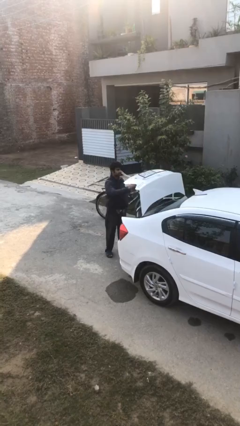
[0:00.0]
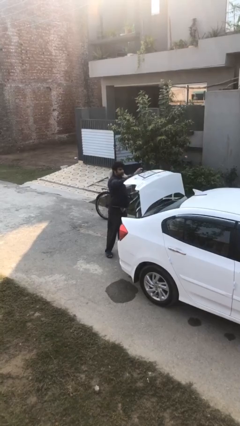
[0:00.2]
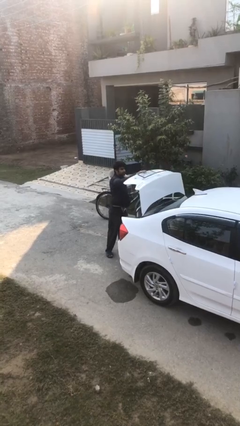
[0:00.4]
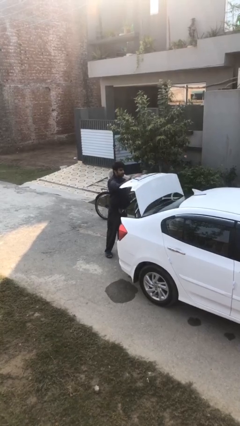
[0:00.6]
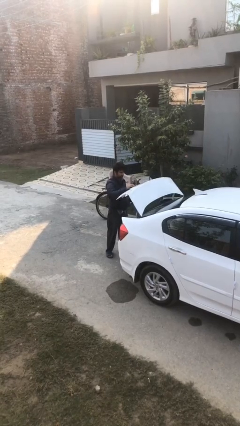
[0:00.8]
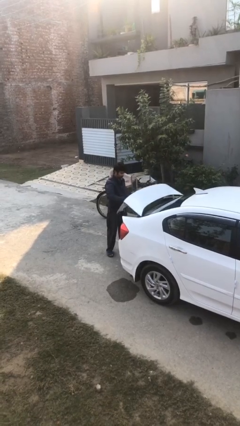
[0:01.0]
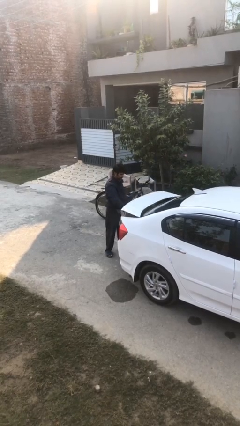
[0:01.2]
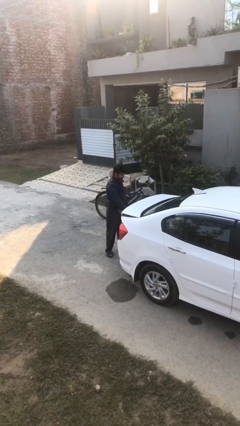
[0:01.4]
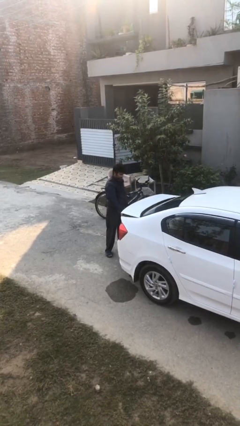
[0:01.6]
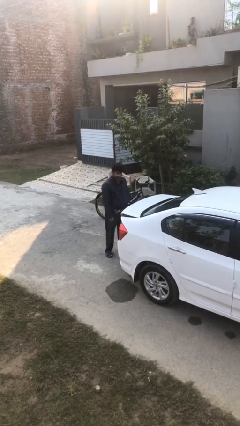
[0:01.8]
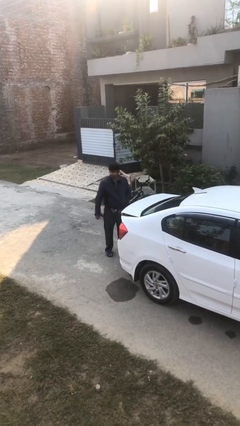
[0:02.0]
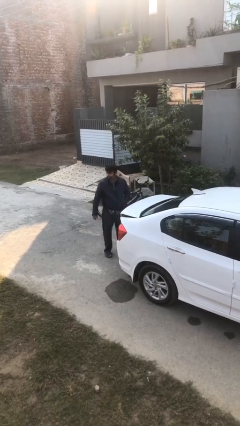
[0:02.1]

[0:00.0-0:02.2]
person closes car trunk

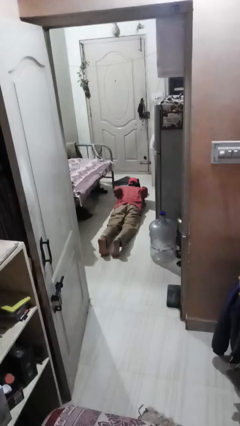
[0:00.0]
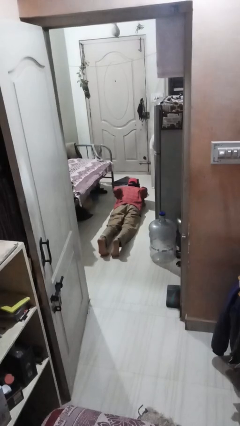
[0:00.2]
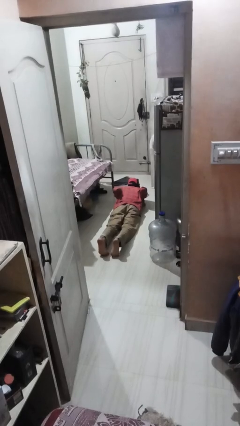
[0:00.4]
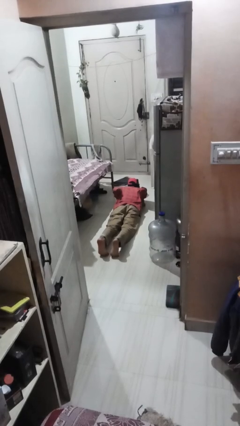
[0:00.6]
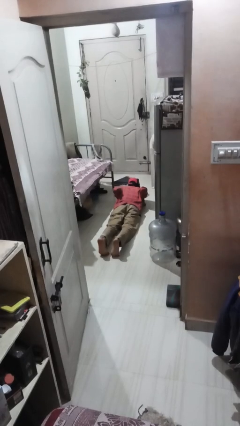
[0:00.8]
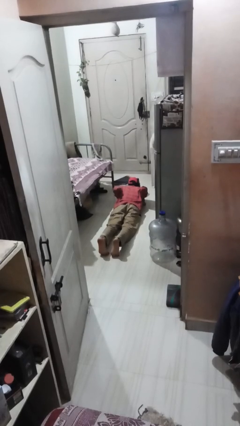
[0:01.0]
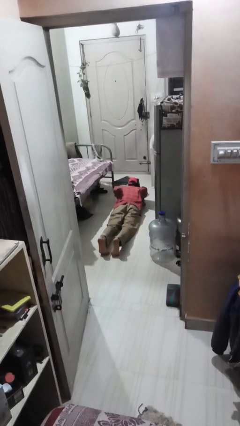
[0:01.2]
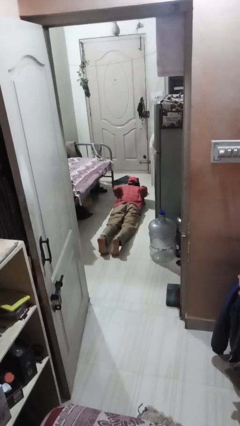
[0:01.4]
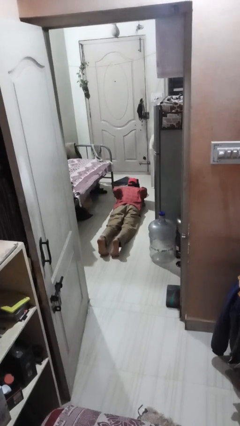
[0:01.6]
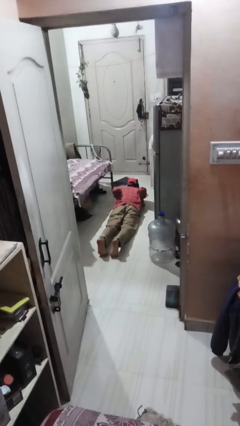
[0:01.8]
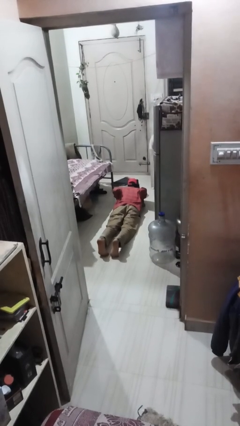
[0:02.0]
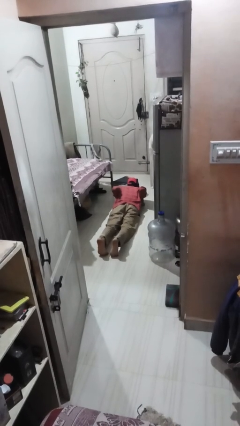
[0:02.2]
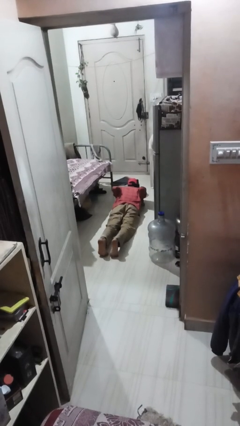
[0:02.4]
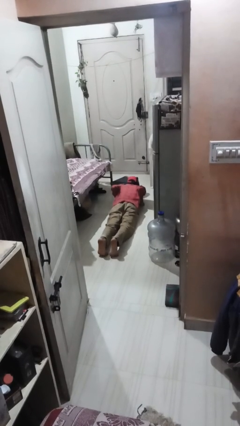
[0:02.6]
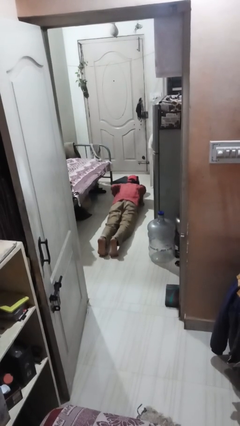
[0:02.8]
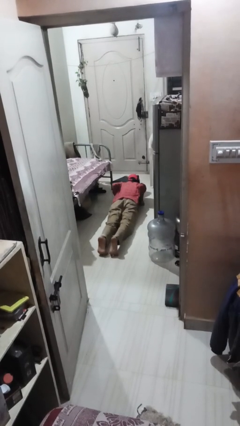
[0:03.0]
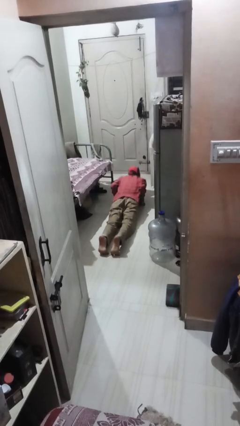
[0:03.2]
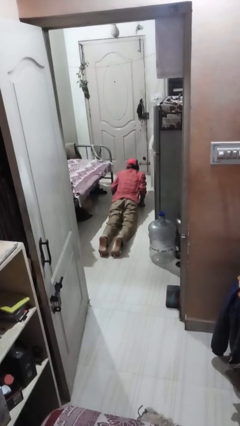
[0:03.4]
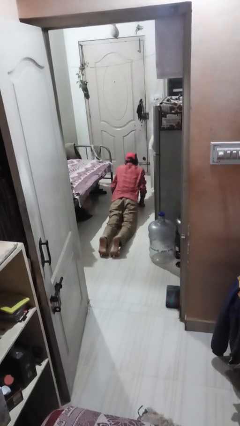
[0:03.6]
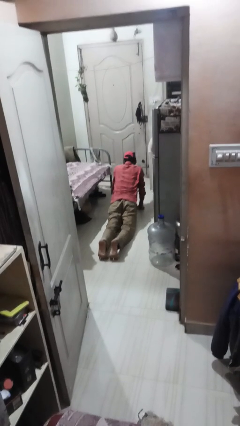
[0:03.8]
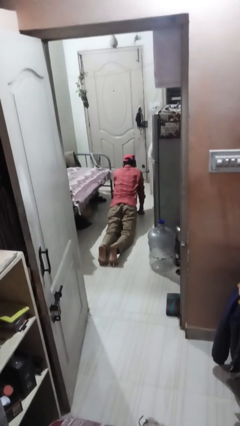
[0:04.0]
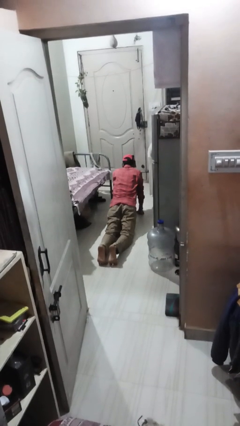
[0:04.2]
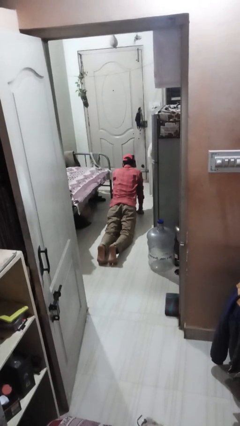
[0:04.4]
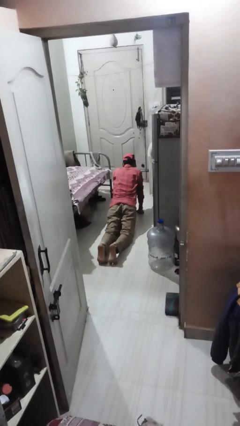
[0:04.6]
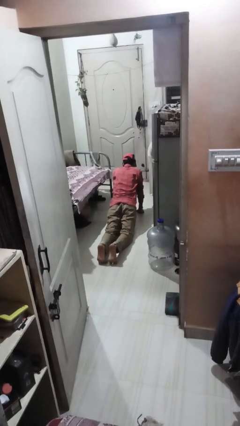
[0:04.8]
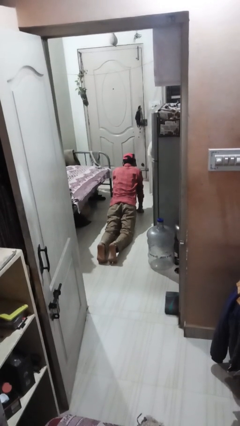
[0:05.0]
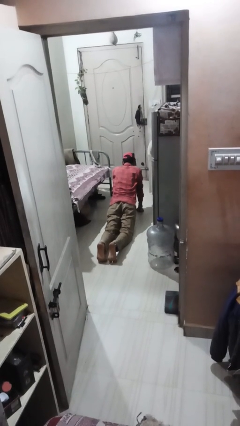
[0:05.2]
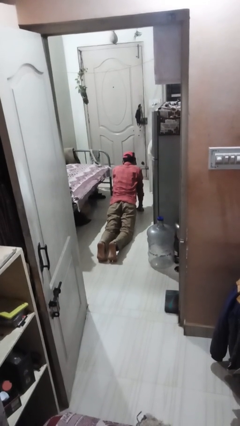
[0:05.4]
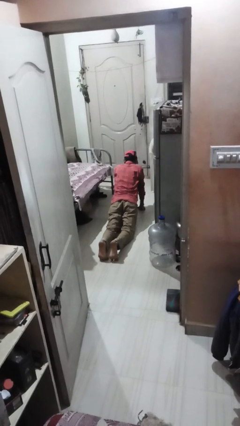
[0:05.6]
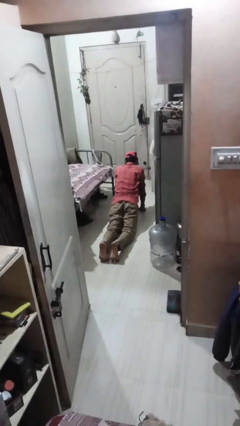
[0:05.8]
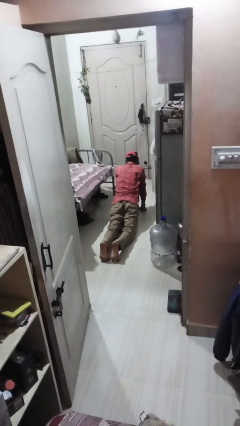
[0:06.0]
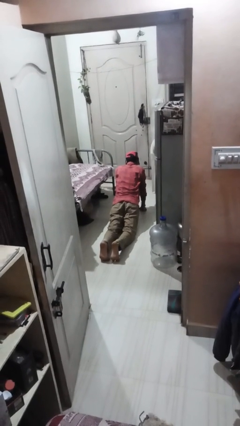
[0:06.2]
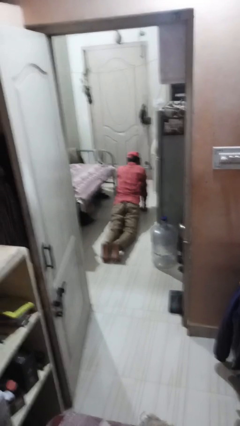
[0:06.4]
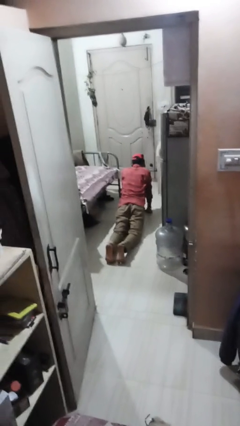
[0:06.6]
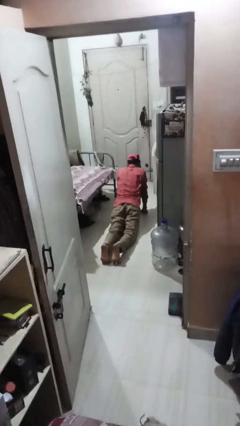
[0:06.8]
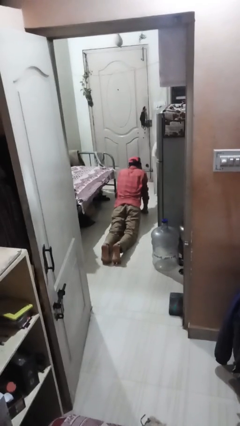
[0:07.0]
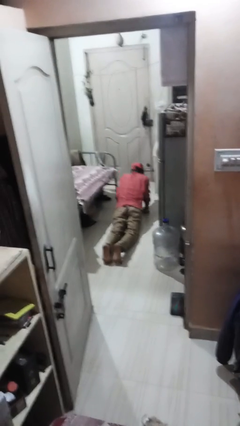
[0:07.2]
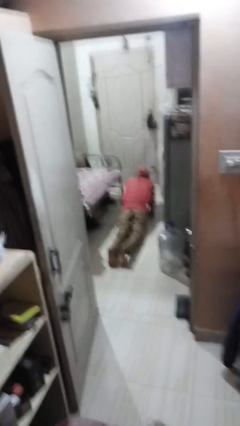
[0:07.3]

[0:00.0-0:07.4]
person exercises with pushup

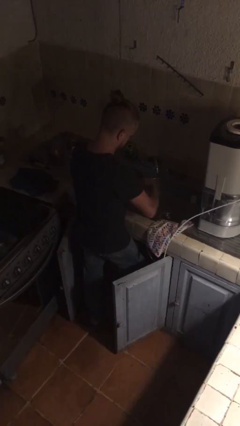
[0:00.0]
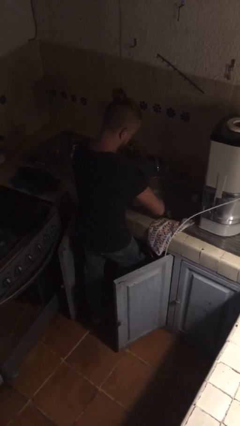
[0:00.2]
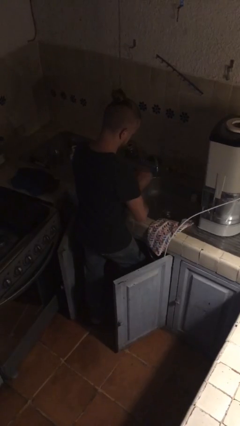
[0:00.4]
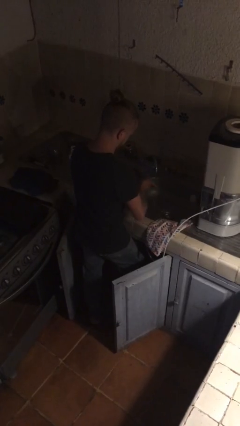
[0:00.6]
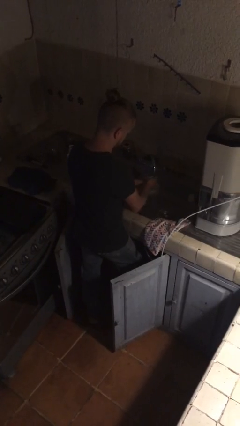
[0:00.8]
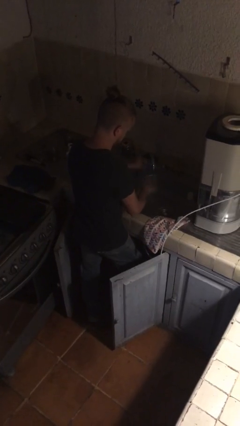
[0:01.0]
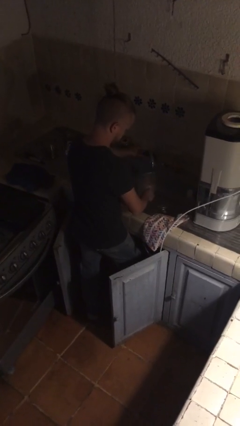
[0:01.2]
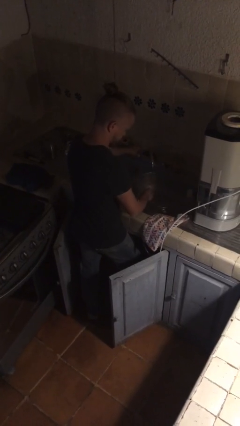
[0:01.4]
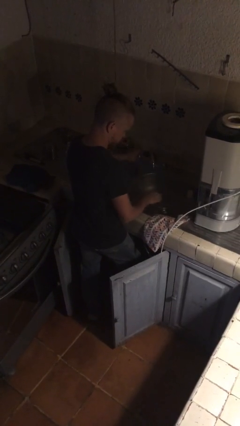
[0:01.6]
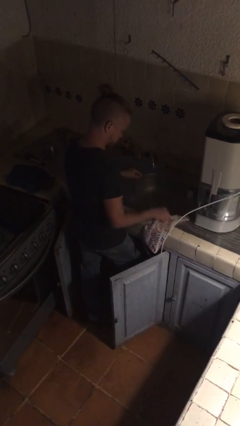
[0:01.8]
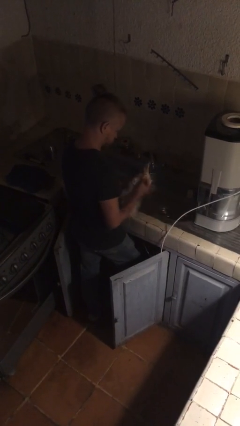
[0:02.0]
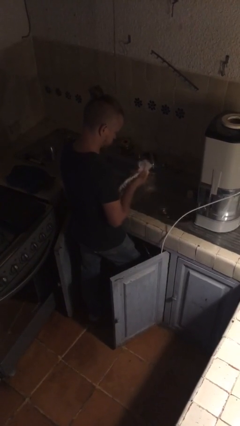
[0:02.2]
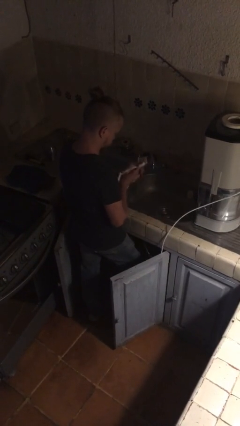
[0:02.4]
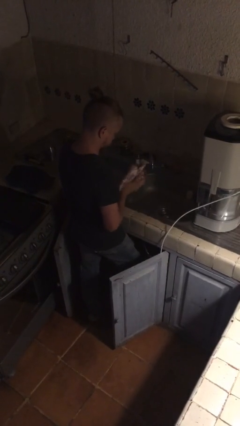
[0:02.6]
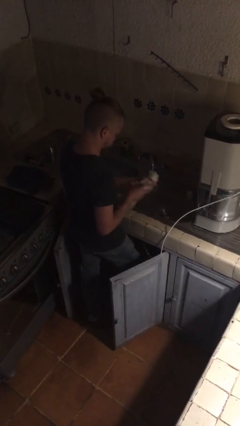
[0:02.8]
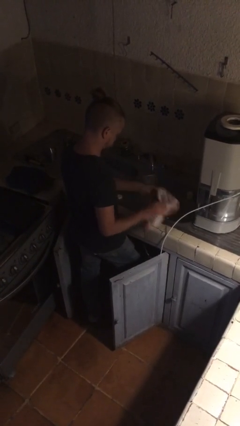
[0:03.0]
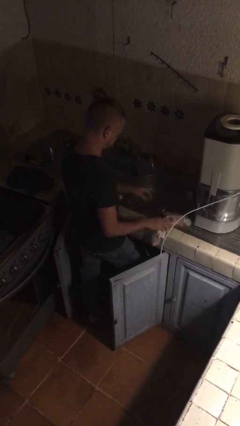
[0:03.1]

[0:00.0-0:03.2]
person dries hands with towel

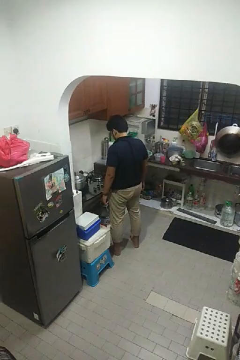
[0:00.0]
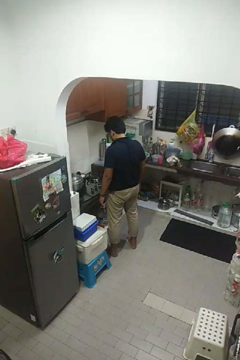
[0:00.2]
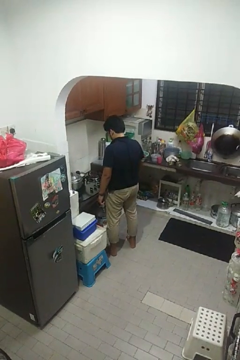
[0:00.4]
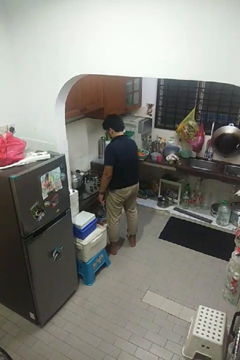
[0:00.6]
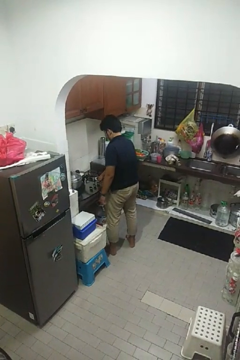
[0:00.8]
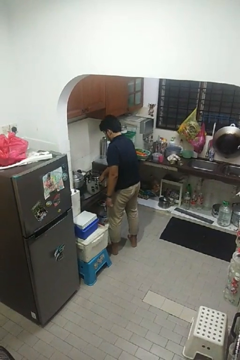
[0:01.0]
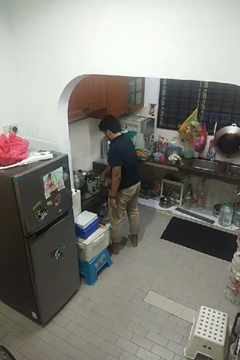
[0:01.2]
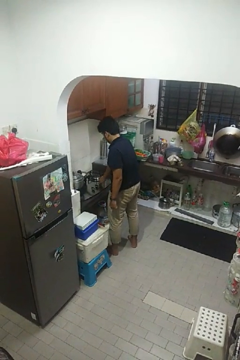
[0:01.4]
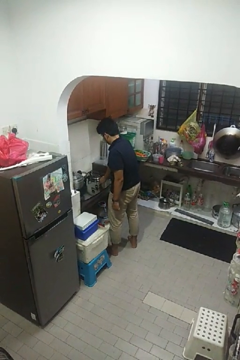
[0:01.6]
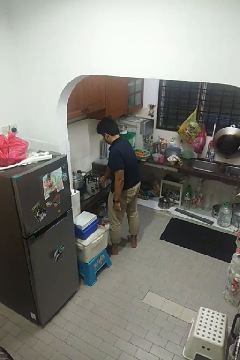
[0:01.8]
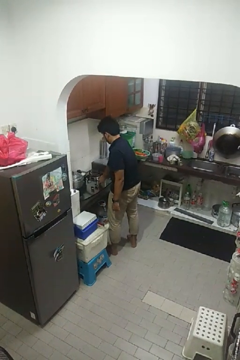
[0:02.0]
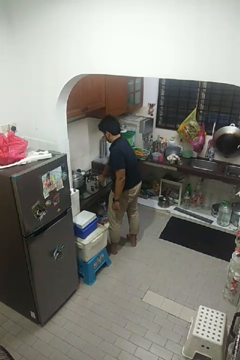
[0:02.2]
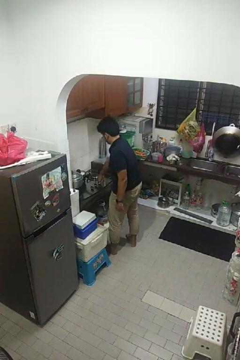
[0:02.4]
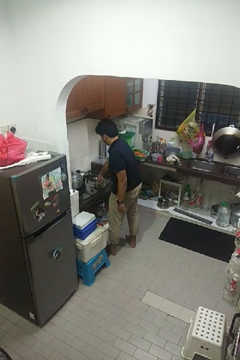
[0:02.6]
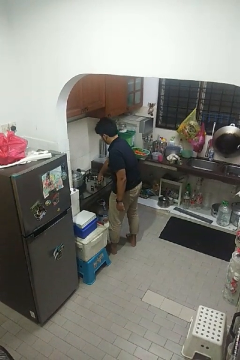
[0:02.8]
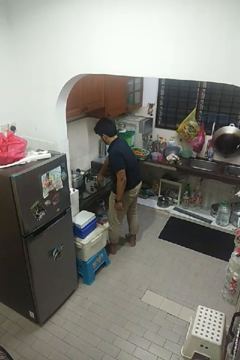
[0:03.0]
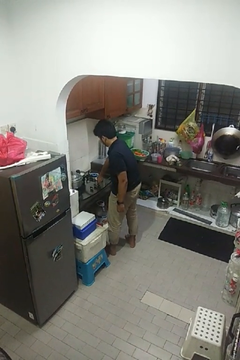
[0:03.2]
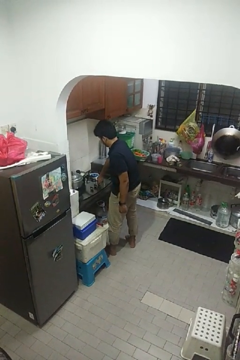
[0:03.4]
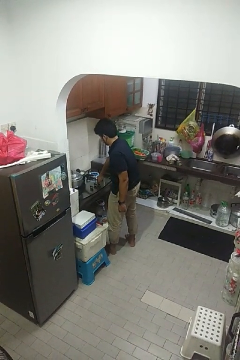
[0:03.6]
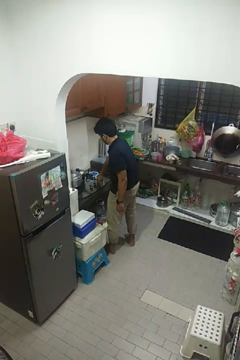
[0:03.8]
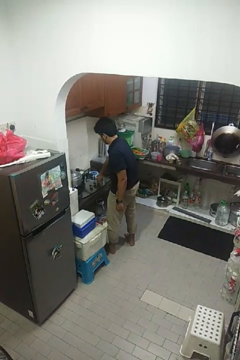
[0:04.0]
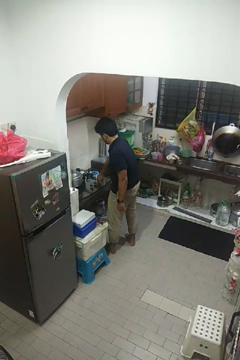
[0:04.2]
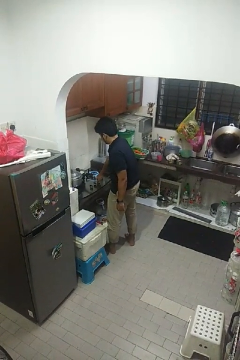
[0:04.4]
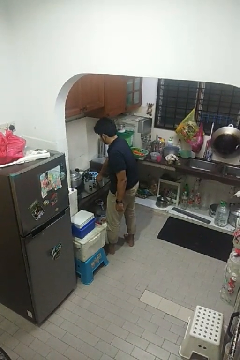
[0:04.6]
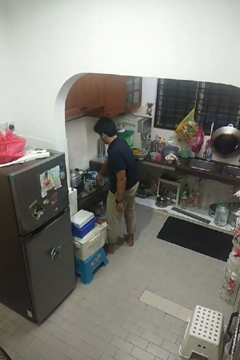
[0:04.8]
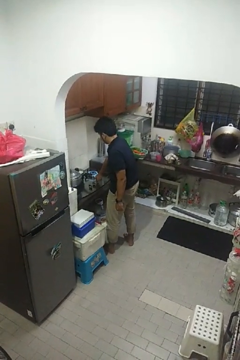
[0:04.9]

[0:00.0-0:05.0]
person turns on stovetop

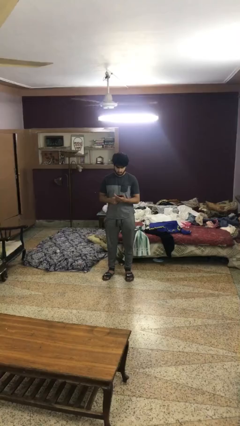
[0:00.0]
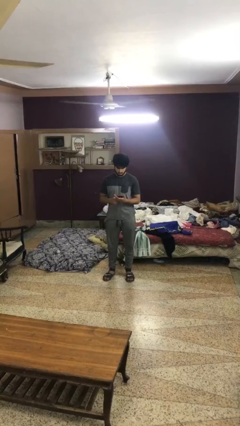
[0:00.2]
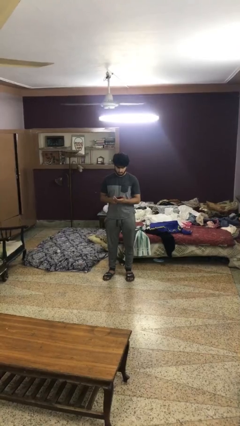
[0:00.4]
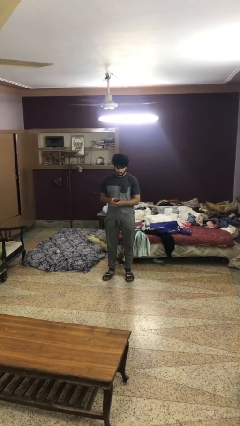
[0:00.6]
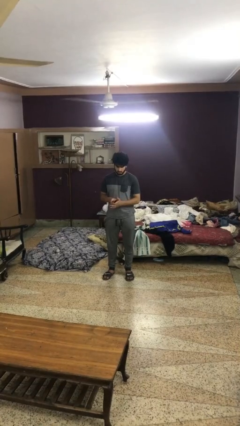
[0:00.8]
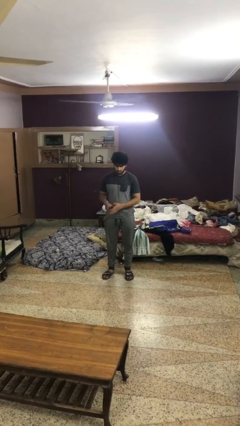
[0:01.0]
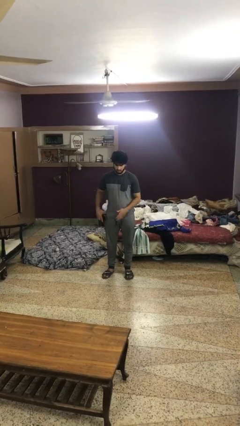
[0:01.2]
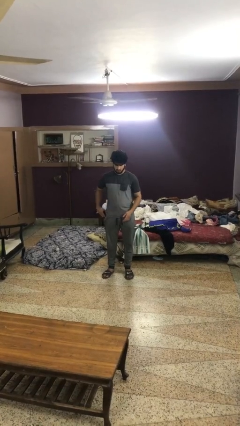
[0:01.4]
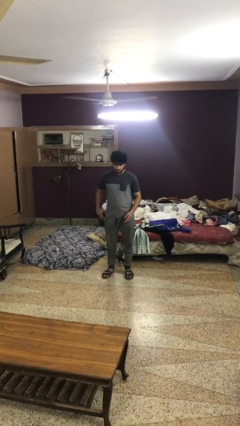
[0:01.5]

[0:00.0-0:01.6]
person puts phone into pocket
